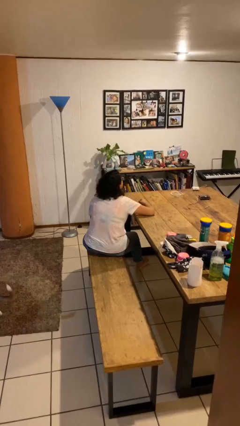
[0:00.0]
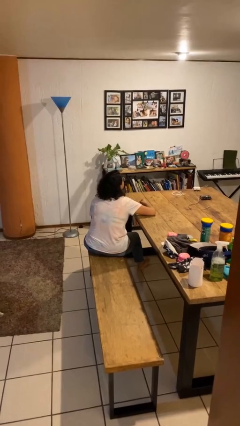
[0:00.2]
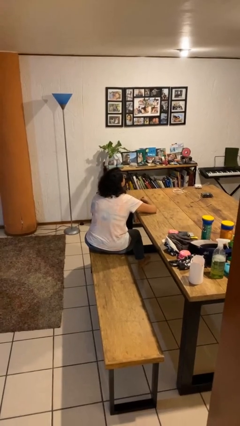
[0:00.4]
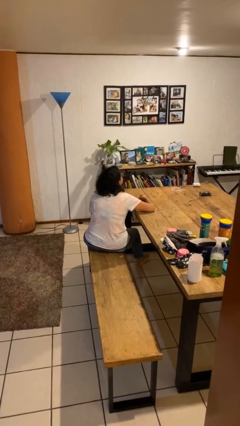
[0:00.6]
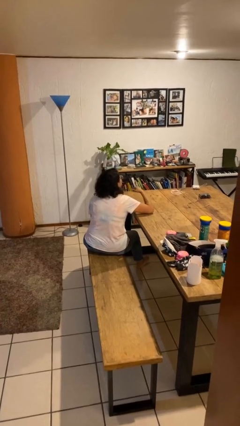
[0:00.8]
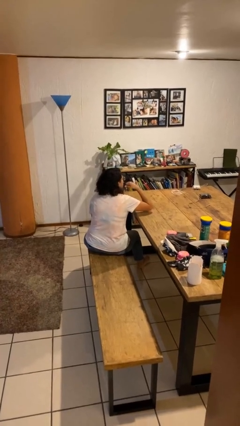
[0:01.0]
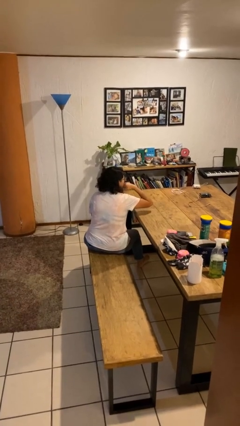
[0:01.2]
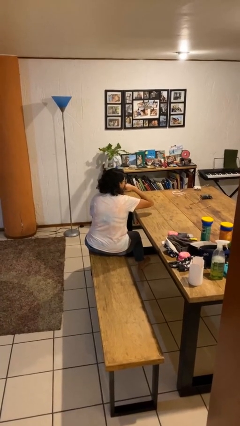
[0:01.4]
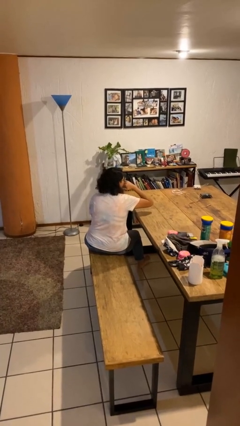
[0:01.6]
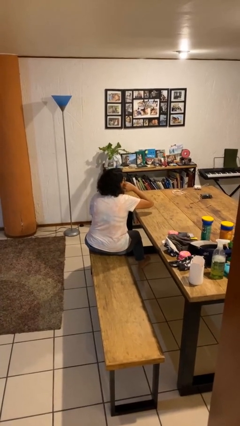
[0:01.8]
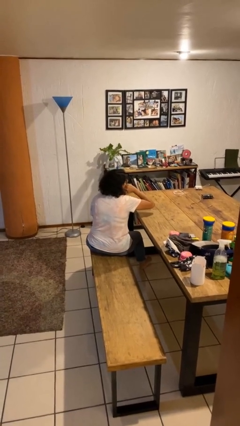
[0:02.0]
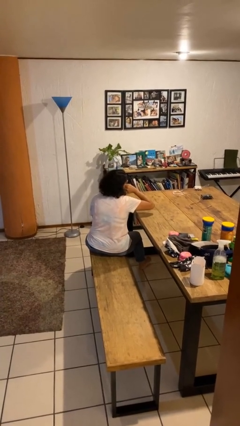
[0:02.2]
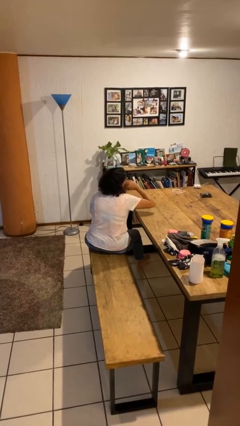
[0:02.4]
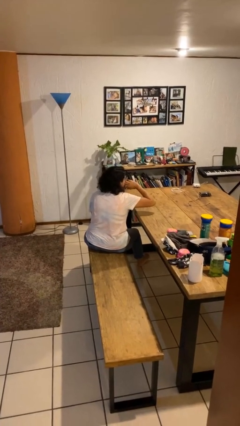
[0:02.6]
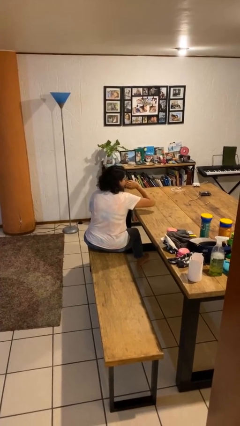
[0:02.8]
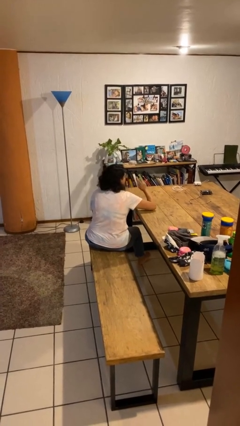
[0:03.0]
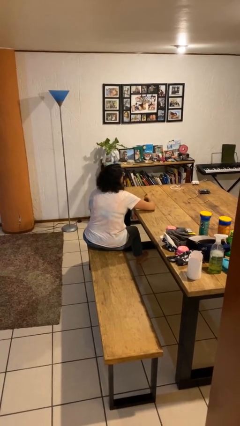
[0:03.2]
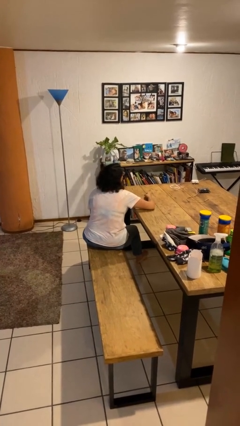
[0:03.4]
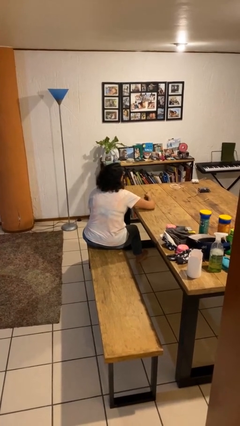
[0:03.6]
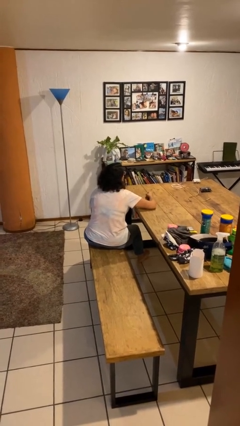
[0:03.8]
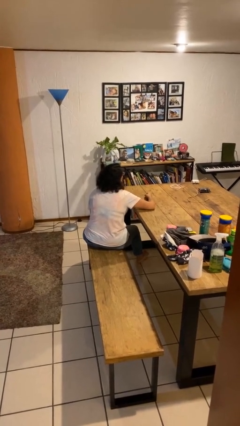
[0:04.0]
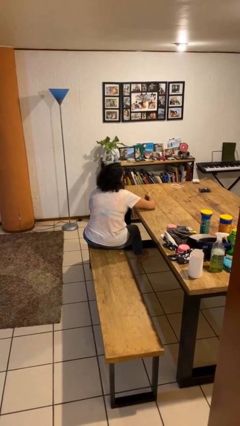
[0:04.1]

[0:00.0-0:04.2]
person licks fingers

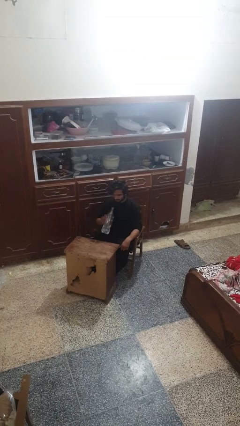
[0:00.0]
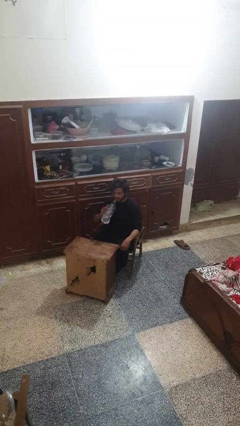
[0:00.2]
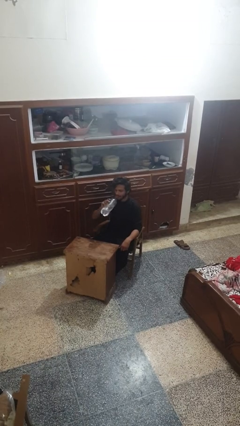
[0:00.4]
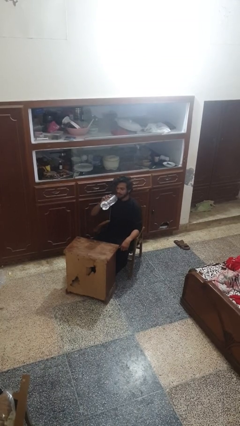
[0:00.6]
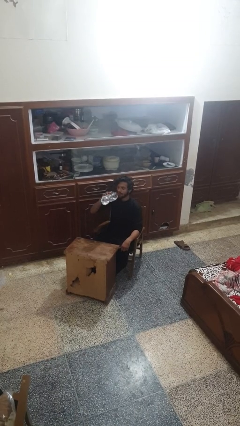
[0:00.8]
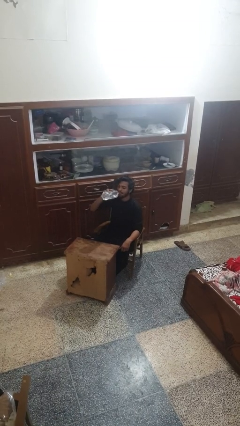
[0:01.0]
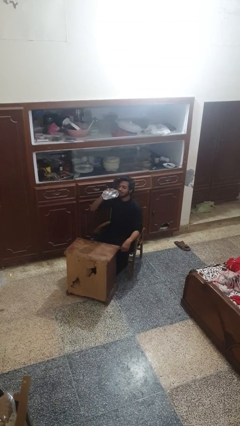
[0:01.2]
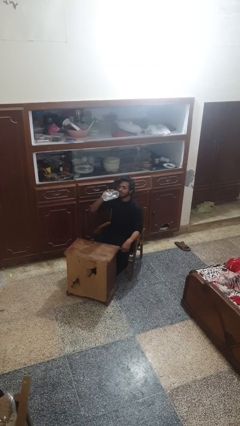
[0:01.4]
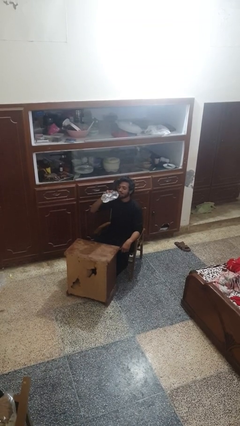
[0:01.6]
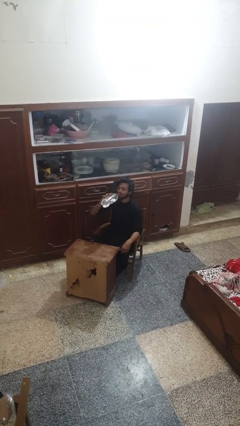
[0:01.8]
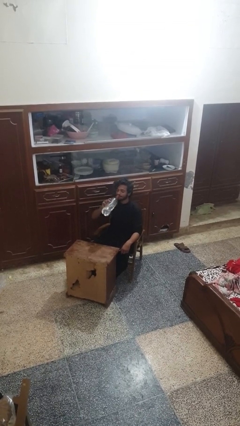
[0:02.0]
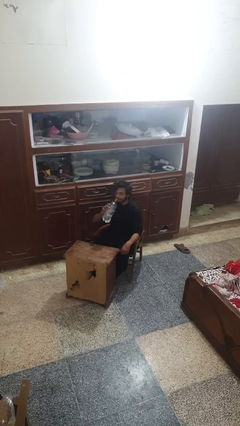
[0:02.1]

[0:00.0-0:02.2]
person drinks from bottle

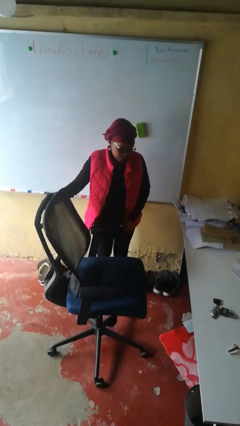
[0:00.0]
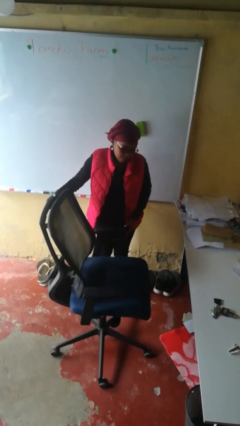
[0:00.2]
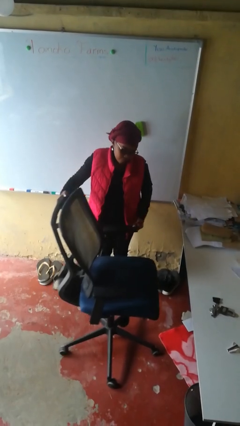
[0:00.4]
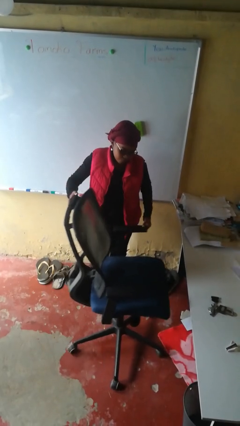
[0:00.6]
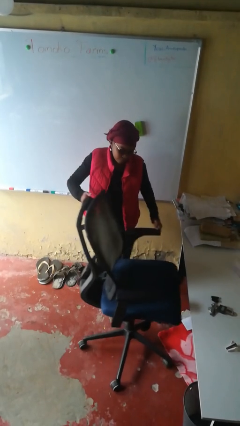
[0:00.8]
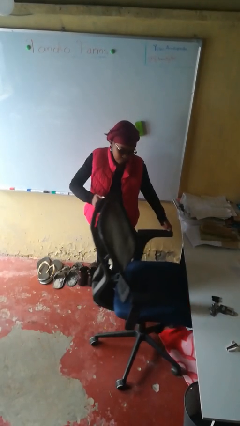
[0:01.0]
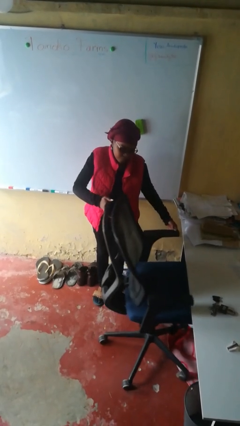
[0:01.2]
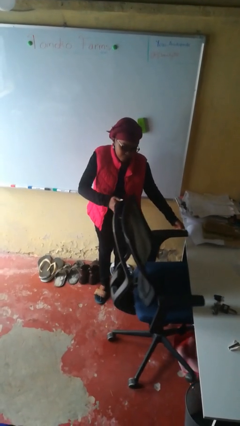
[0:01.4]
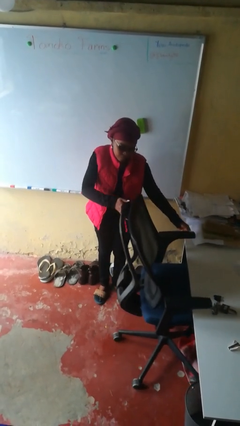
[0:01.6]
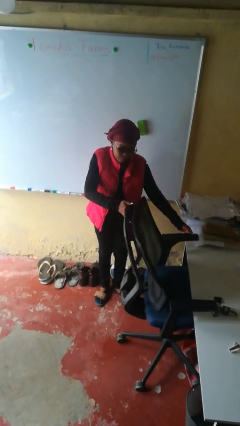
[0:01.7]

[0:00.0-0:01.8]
person pushes in chair

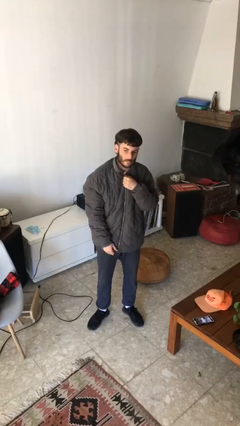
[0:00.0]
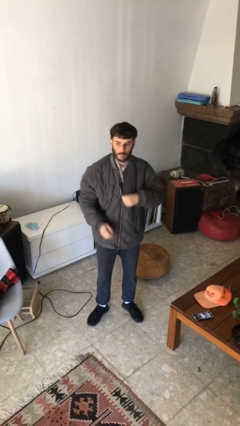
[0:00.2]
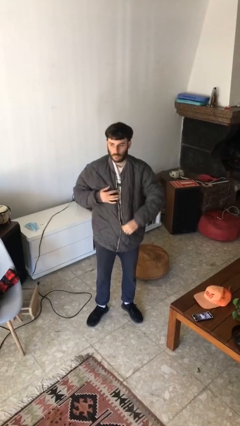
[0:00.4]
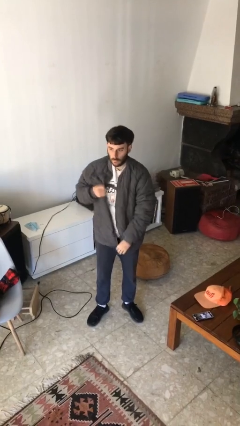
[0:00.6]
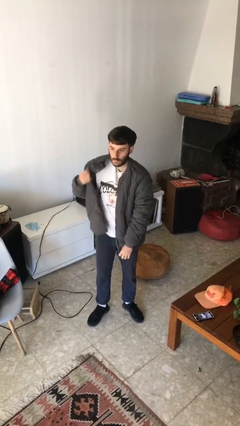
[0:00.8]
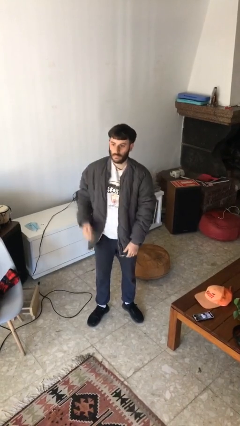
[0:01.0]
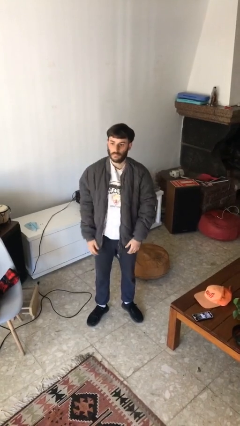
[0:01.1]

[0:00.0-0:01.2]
person unzips jacket

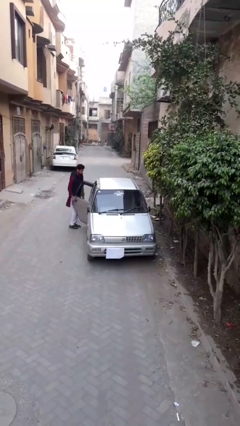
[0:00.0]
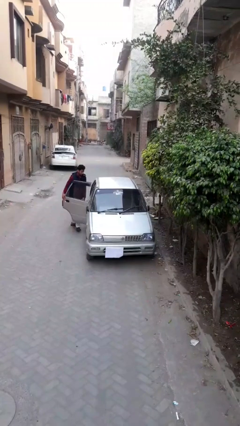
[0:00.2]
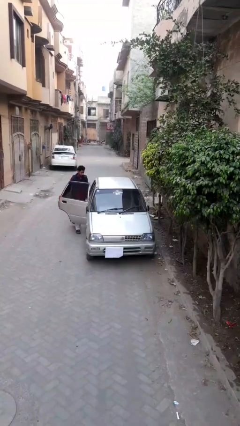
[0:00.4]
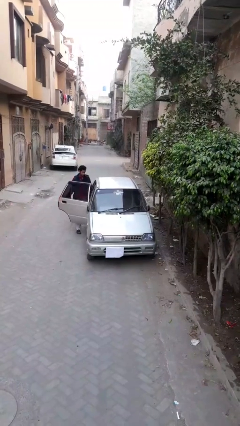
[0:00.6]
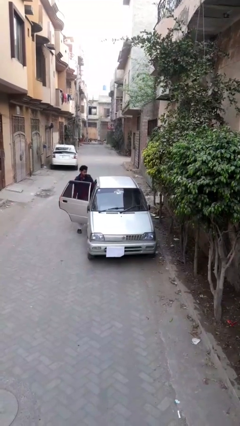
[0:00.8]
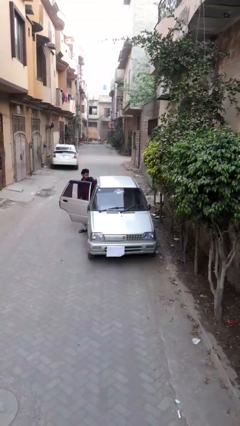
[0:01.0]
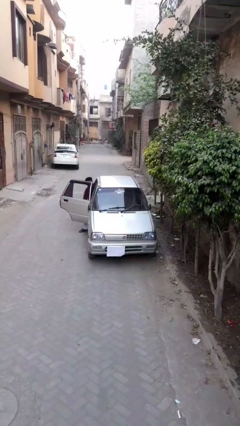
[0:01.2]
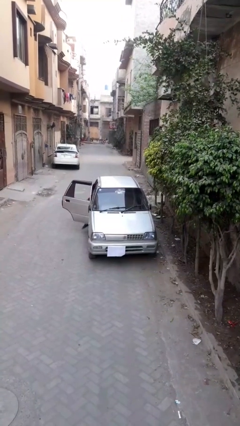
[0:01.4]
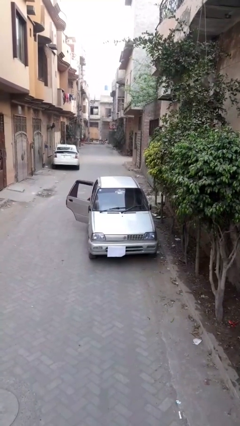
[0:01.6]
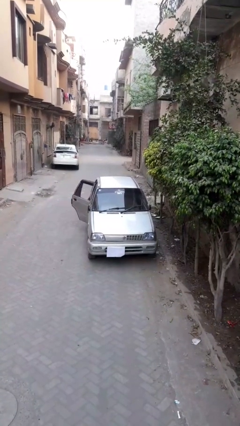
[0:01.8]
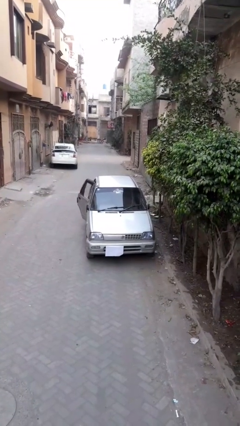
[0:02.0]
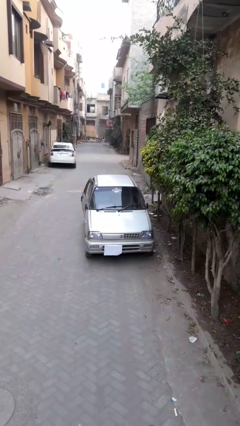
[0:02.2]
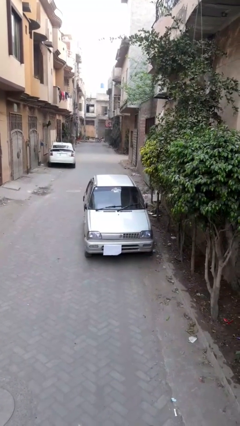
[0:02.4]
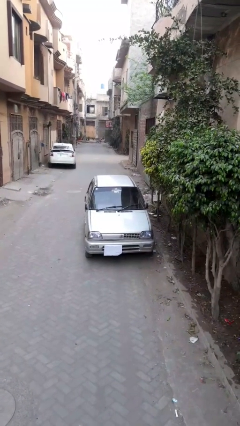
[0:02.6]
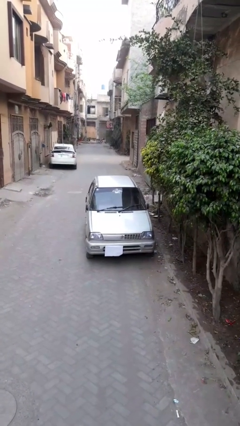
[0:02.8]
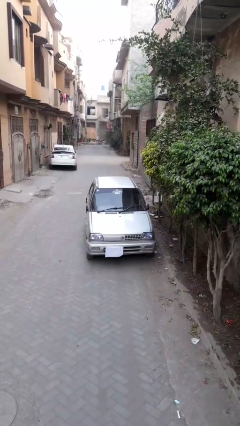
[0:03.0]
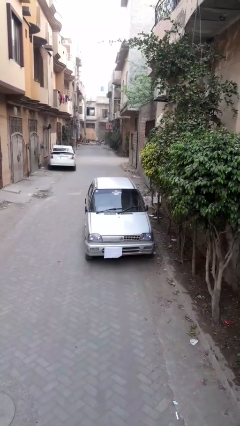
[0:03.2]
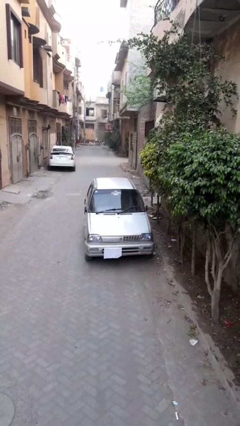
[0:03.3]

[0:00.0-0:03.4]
car picks up person

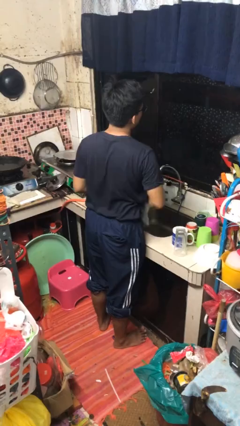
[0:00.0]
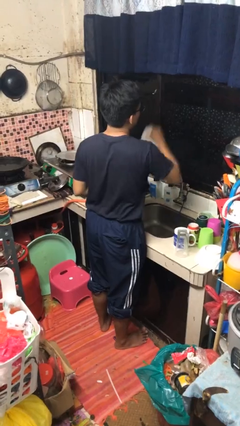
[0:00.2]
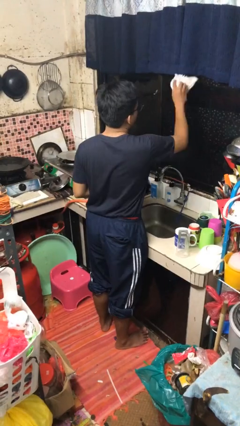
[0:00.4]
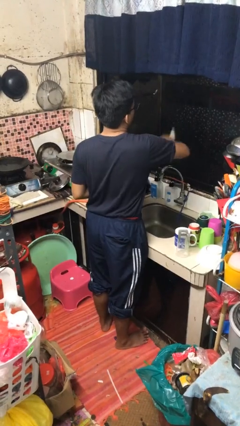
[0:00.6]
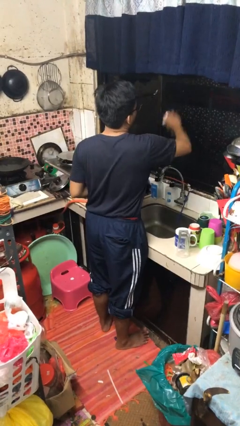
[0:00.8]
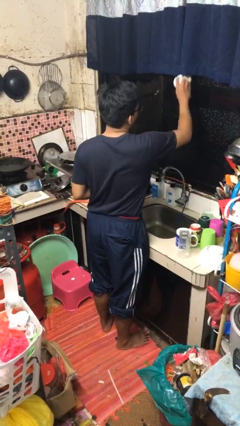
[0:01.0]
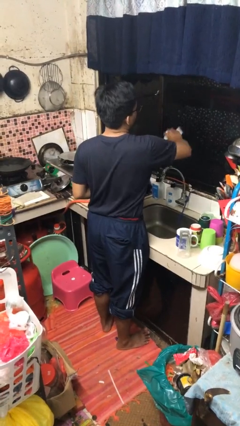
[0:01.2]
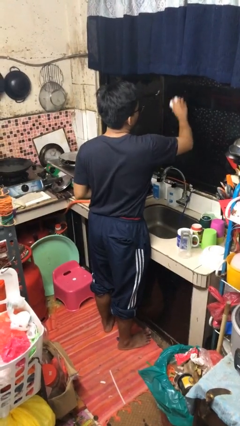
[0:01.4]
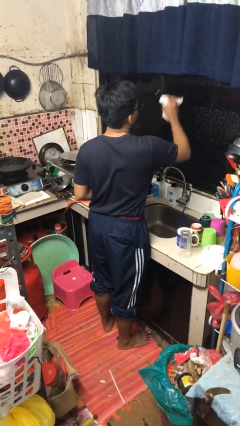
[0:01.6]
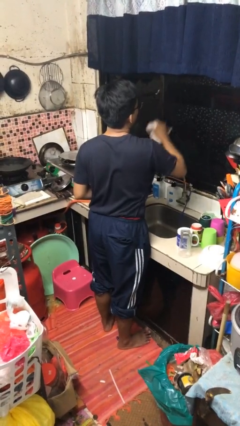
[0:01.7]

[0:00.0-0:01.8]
person washes window

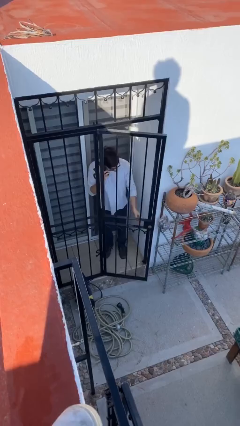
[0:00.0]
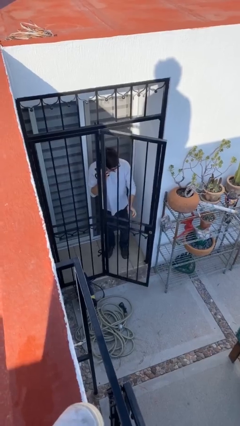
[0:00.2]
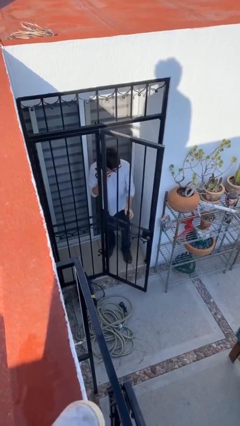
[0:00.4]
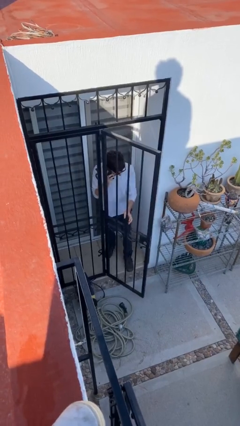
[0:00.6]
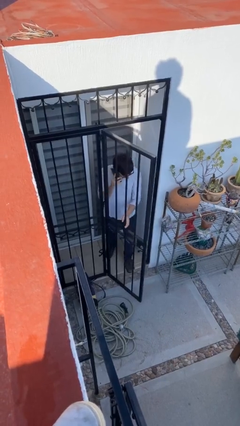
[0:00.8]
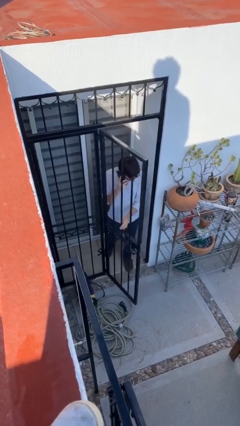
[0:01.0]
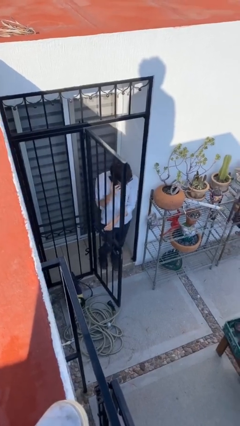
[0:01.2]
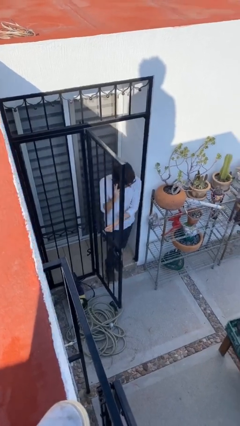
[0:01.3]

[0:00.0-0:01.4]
person opens facility door

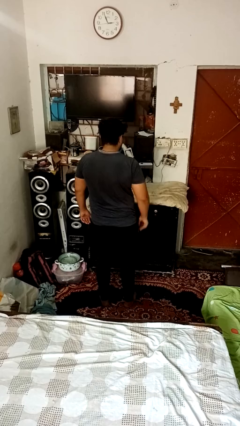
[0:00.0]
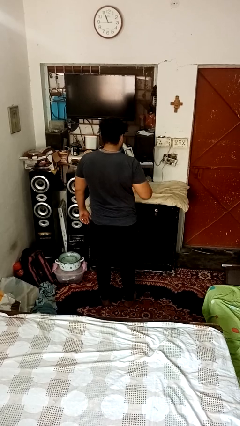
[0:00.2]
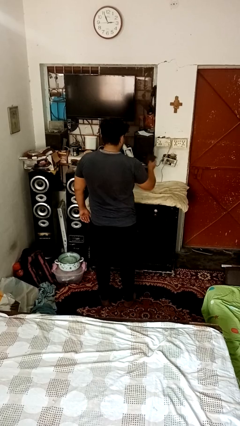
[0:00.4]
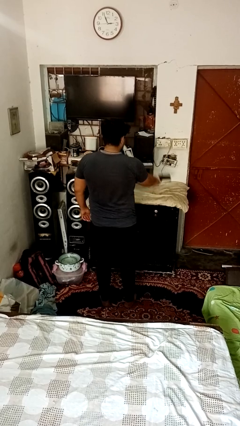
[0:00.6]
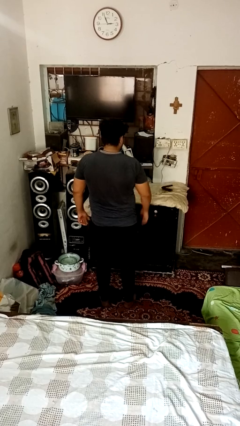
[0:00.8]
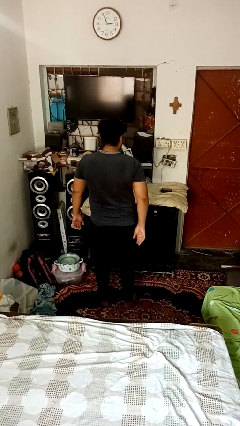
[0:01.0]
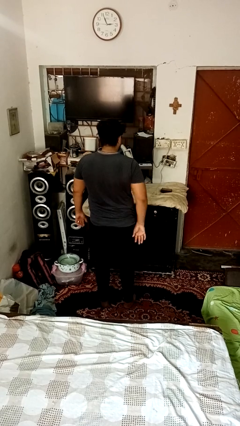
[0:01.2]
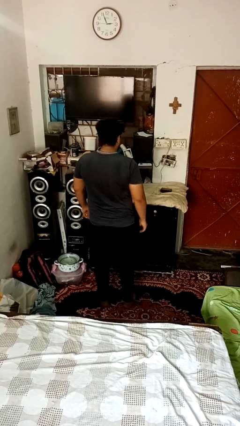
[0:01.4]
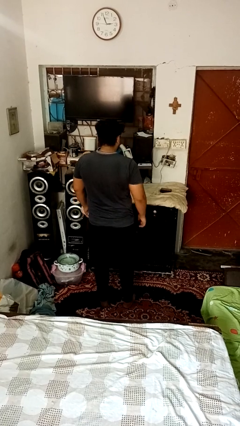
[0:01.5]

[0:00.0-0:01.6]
person throws object on table
